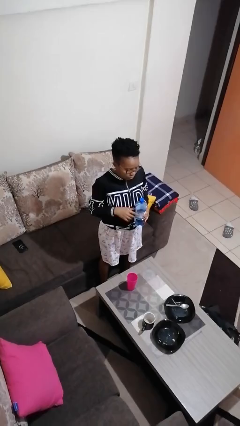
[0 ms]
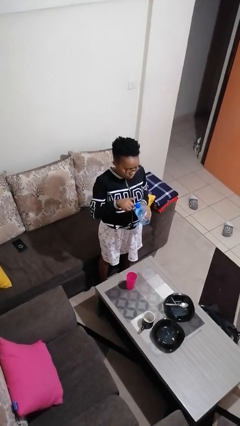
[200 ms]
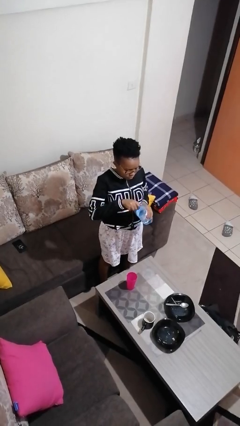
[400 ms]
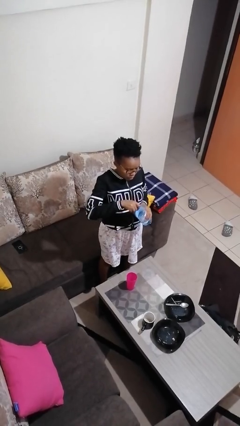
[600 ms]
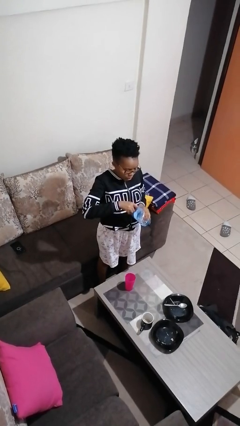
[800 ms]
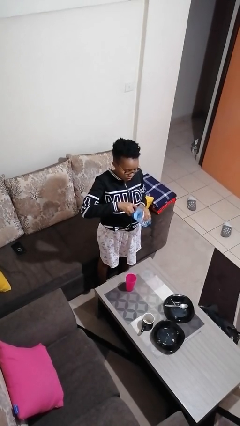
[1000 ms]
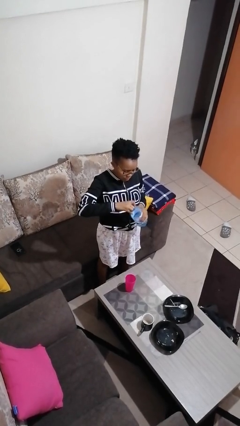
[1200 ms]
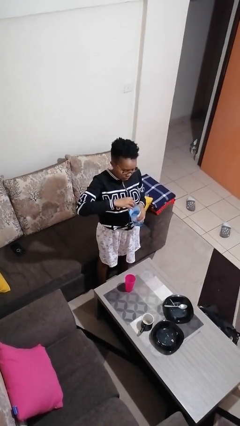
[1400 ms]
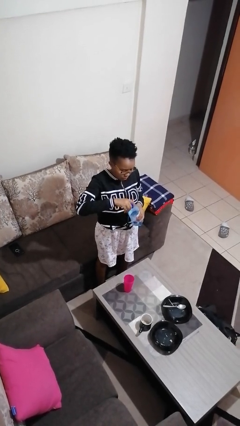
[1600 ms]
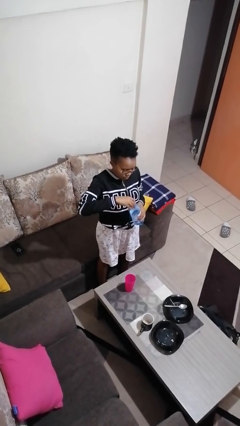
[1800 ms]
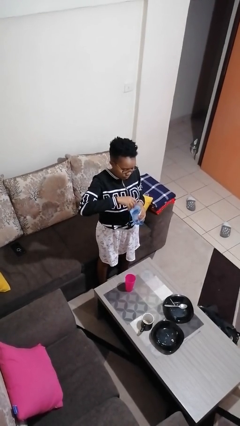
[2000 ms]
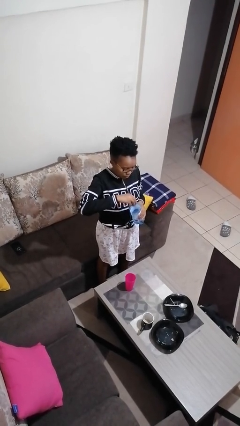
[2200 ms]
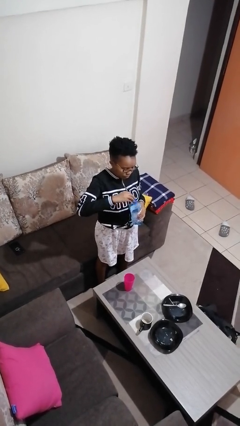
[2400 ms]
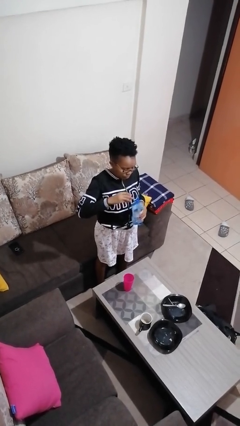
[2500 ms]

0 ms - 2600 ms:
person unscrews lid from bottle

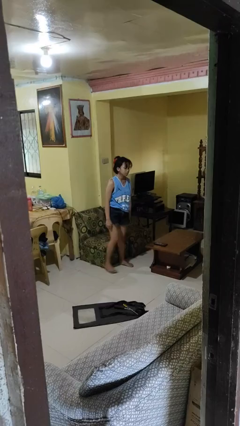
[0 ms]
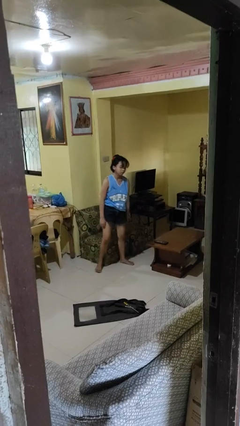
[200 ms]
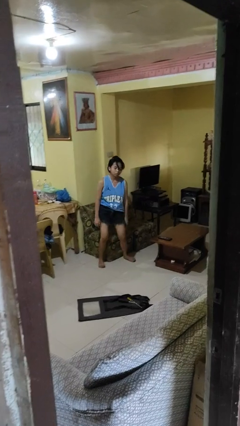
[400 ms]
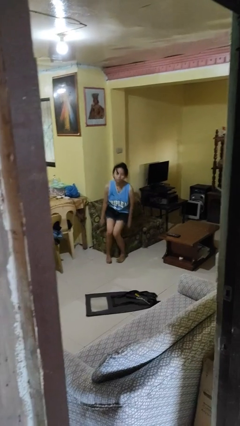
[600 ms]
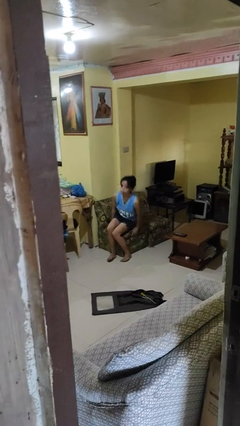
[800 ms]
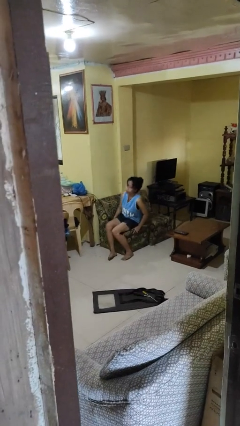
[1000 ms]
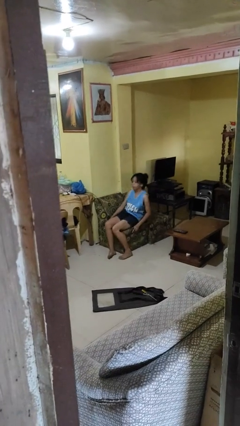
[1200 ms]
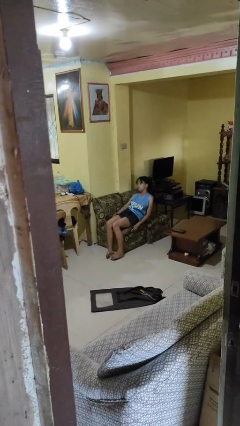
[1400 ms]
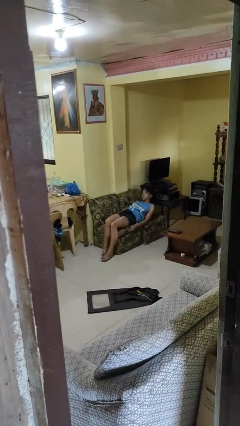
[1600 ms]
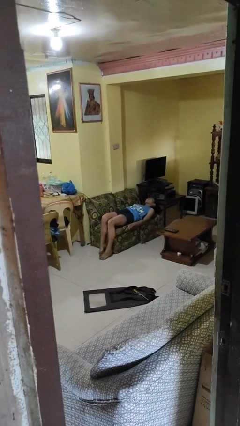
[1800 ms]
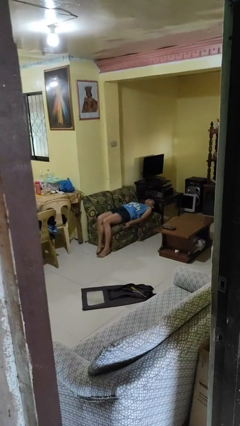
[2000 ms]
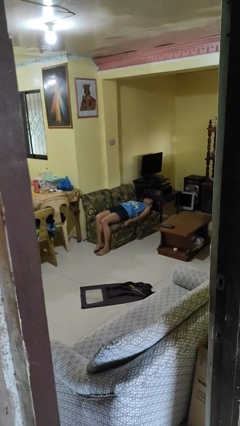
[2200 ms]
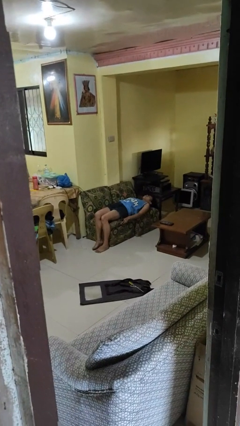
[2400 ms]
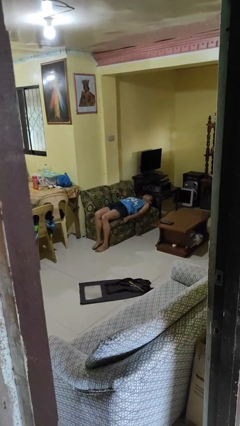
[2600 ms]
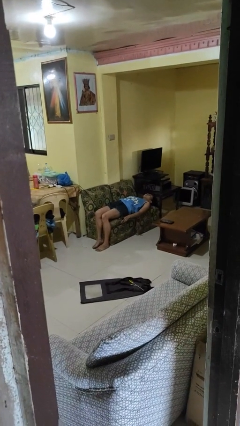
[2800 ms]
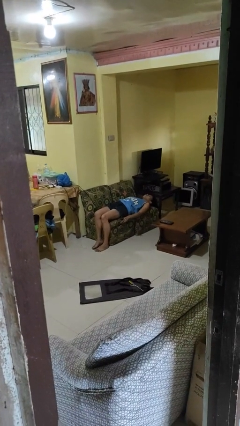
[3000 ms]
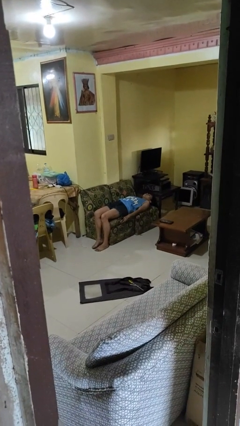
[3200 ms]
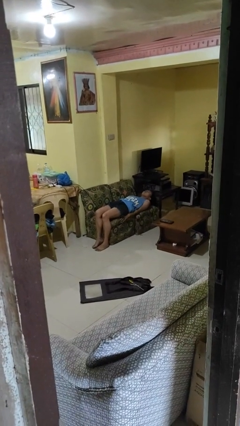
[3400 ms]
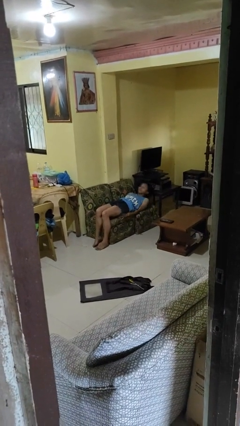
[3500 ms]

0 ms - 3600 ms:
person lies down on couch

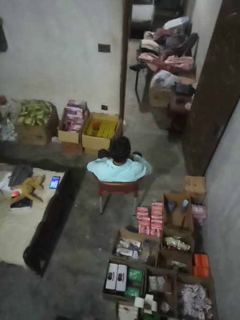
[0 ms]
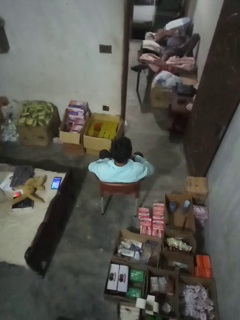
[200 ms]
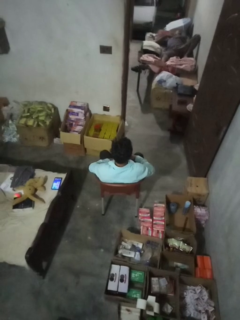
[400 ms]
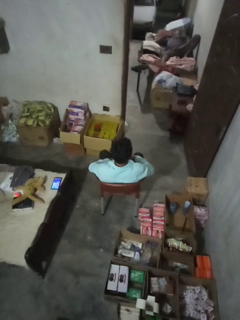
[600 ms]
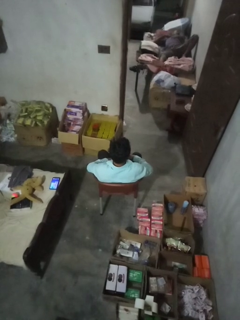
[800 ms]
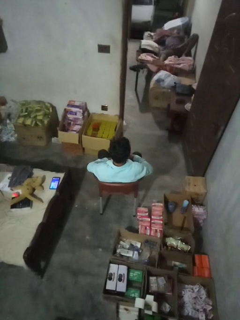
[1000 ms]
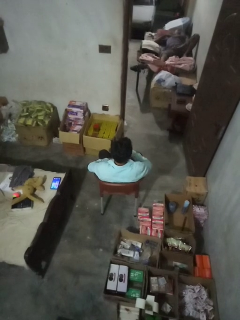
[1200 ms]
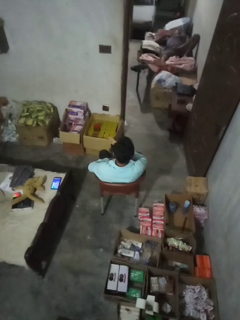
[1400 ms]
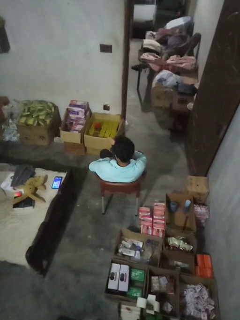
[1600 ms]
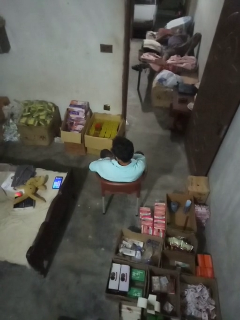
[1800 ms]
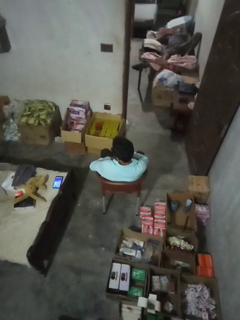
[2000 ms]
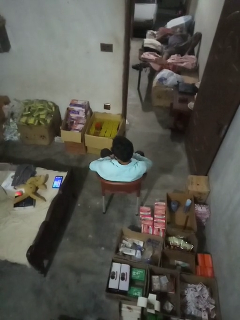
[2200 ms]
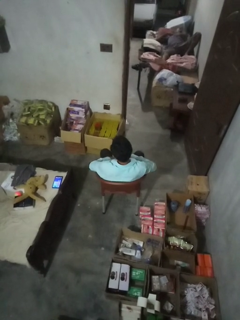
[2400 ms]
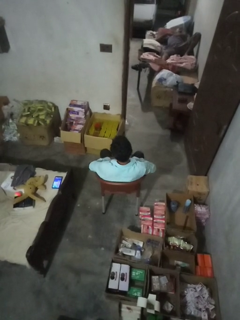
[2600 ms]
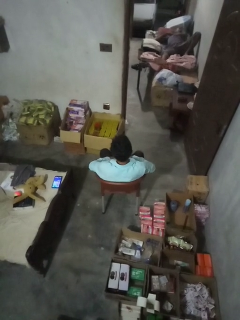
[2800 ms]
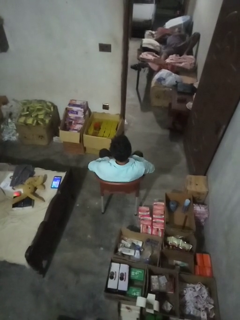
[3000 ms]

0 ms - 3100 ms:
person swats bug

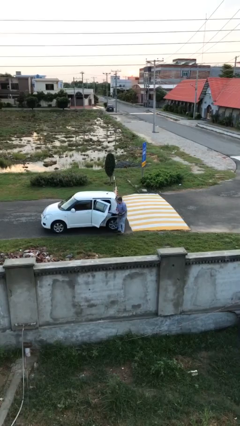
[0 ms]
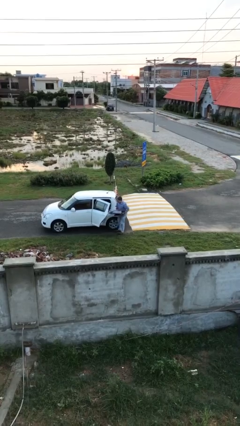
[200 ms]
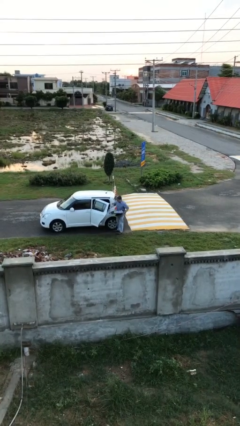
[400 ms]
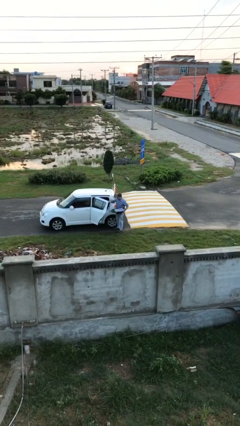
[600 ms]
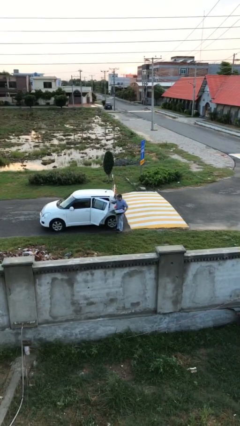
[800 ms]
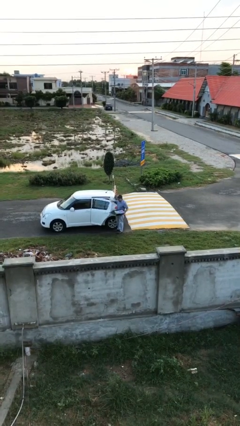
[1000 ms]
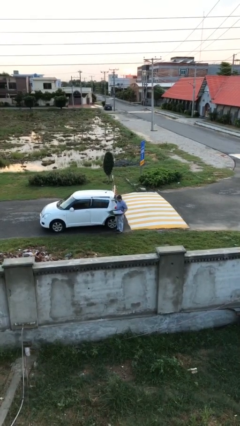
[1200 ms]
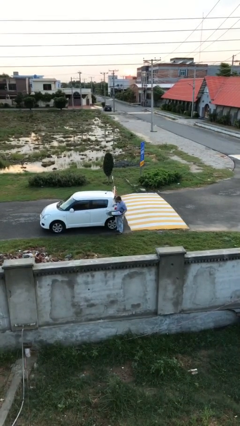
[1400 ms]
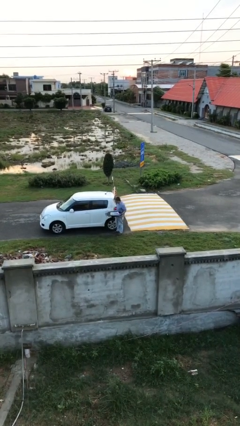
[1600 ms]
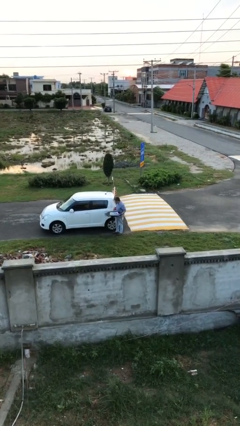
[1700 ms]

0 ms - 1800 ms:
person closes car door

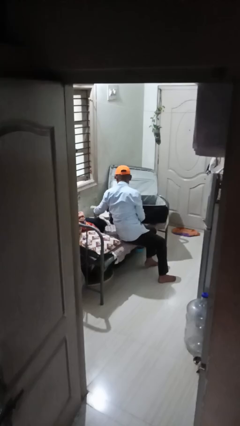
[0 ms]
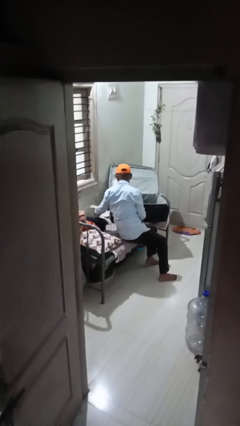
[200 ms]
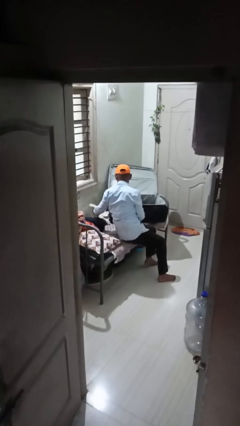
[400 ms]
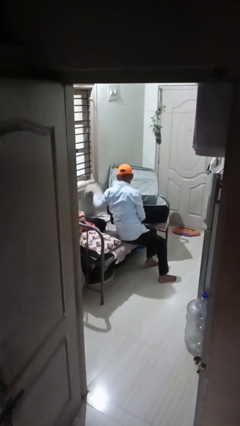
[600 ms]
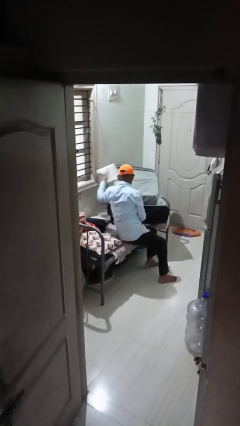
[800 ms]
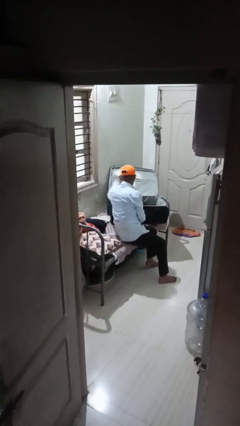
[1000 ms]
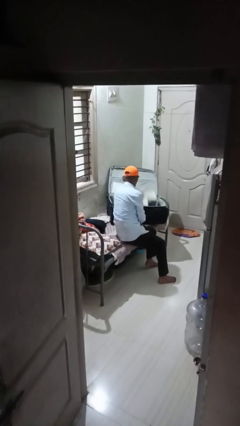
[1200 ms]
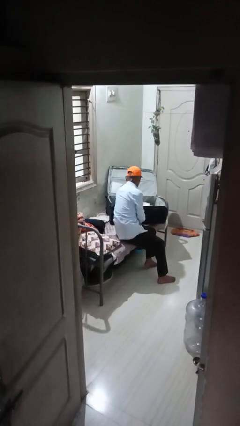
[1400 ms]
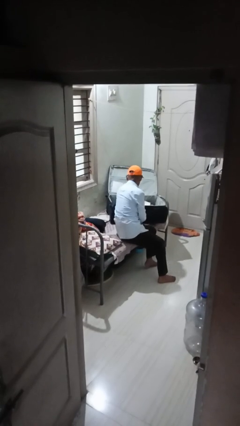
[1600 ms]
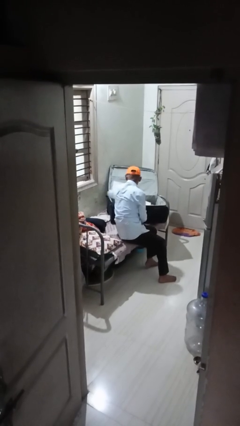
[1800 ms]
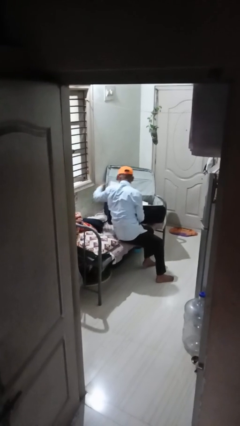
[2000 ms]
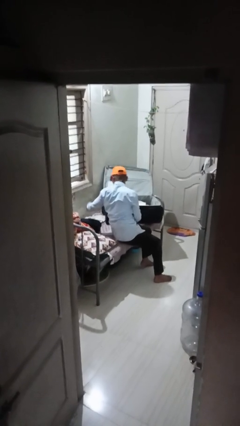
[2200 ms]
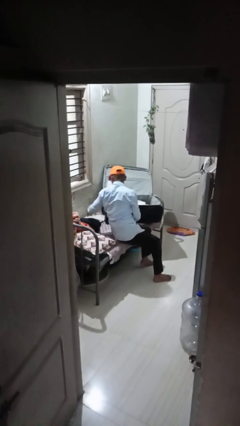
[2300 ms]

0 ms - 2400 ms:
person loads clothes into suitcase

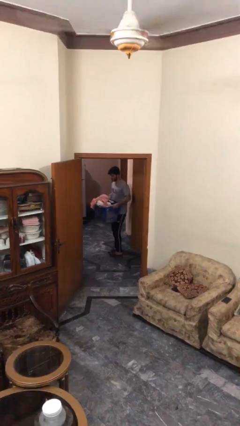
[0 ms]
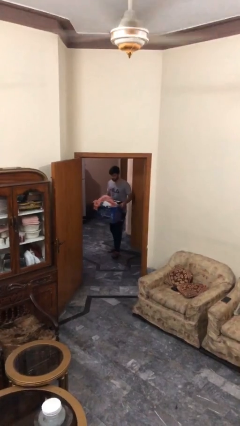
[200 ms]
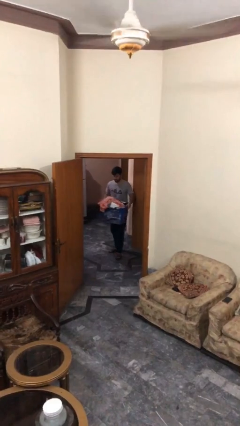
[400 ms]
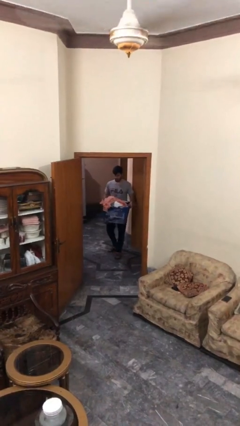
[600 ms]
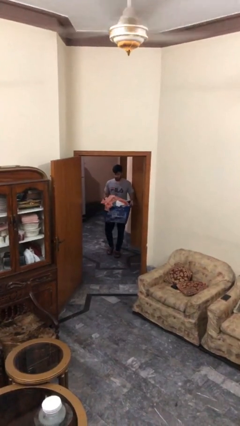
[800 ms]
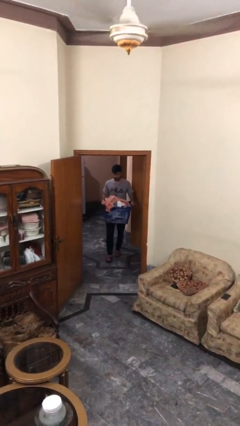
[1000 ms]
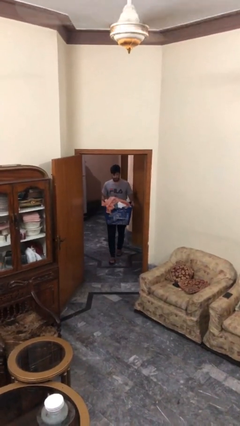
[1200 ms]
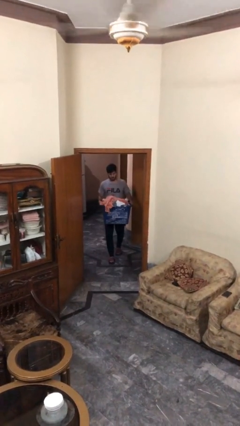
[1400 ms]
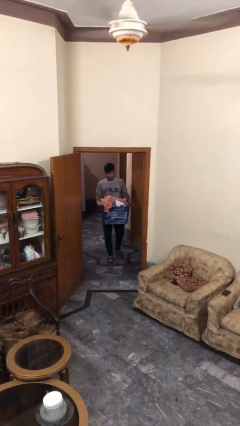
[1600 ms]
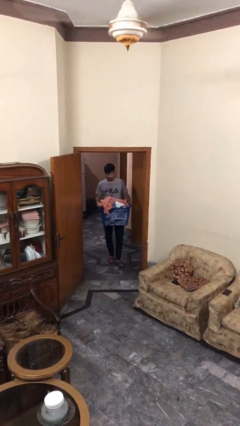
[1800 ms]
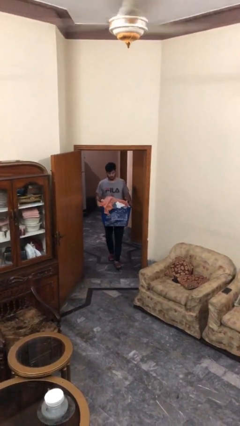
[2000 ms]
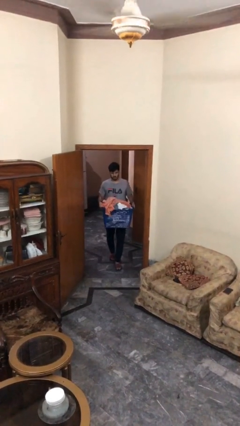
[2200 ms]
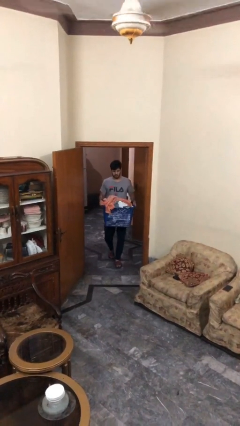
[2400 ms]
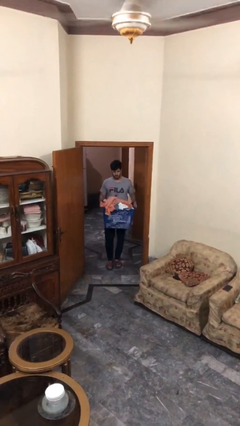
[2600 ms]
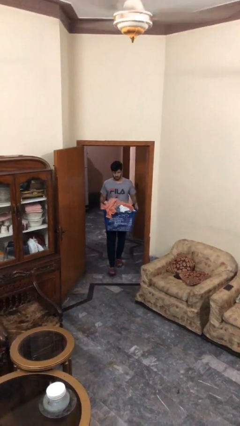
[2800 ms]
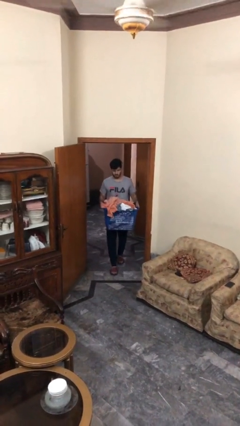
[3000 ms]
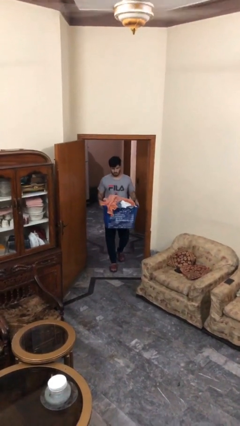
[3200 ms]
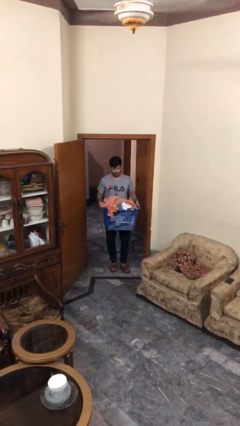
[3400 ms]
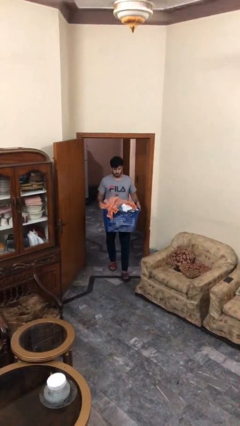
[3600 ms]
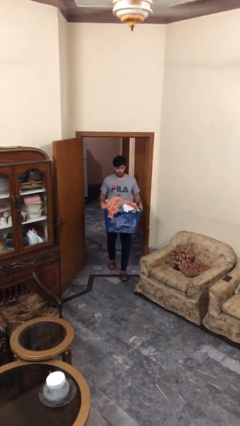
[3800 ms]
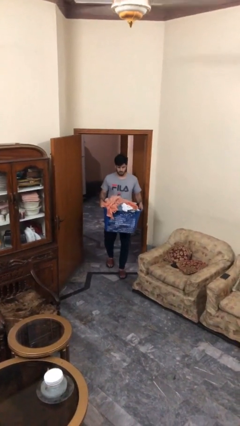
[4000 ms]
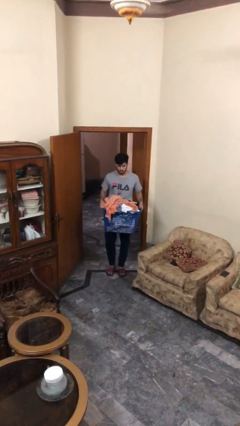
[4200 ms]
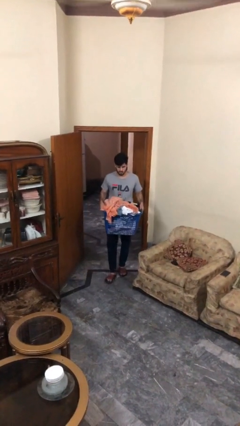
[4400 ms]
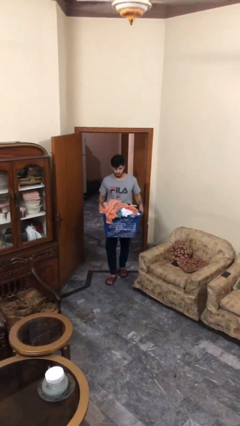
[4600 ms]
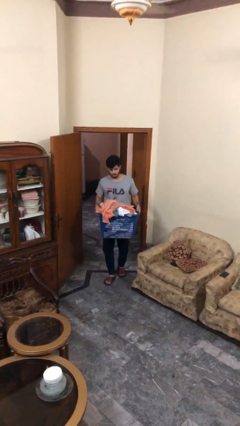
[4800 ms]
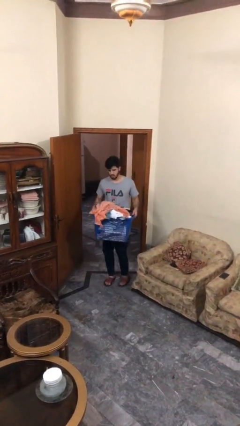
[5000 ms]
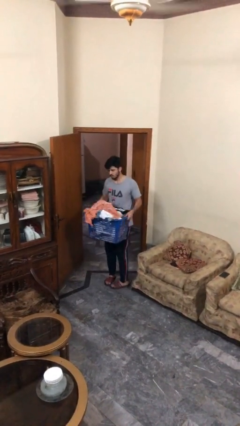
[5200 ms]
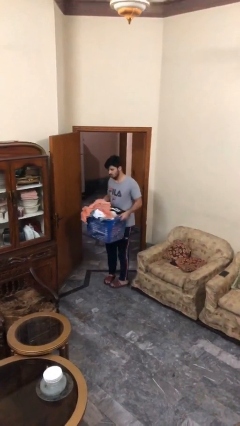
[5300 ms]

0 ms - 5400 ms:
person carries laundry basket
